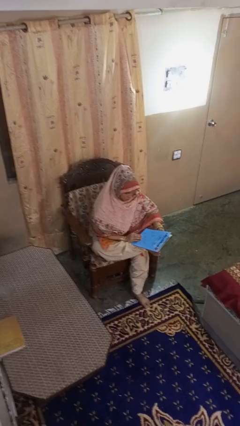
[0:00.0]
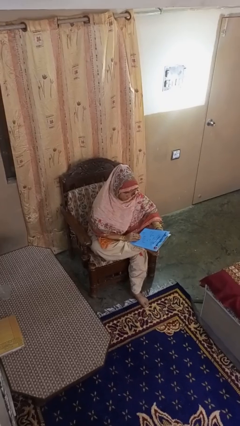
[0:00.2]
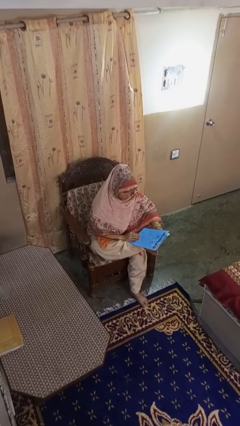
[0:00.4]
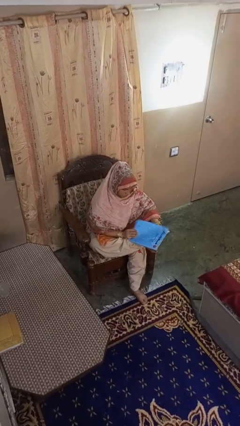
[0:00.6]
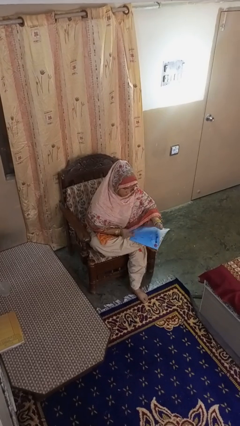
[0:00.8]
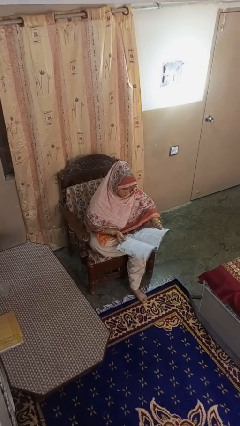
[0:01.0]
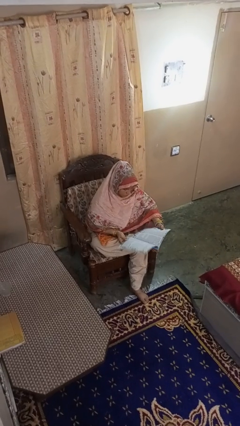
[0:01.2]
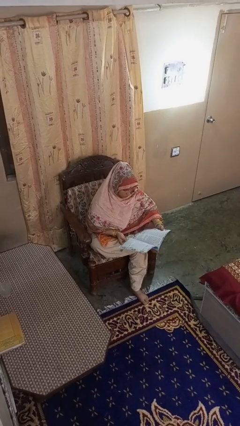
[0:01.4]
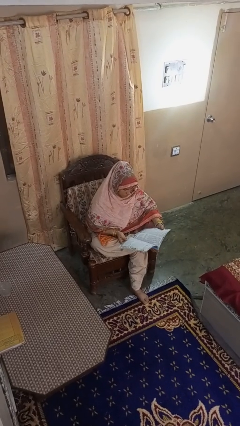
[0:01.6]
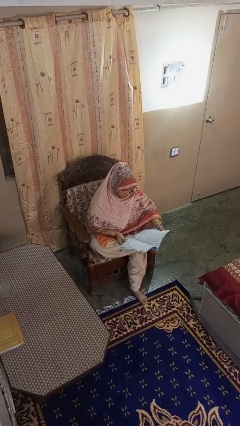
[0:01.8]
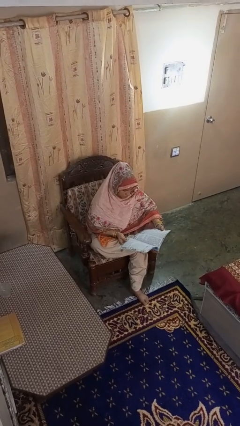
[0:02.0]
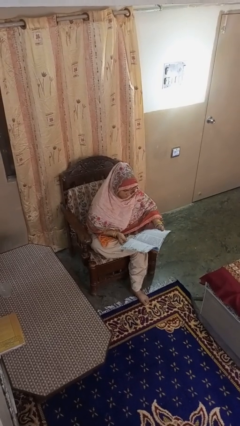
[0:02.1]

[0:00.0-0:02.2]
person reads magazine

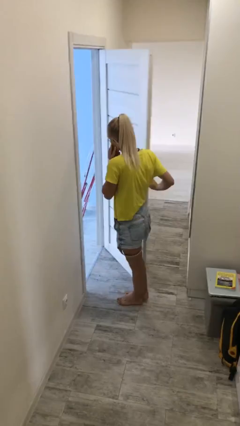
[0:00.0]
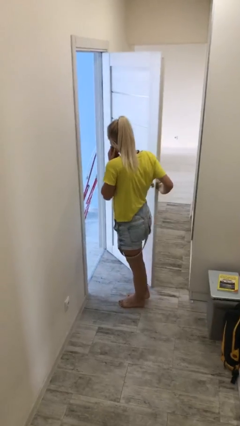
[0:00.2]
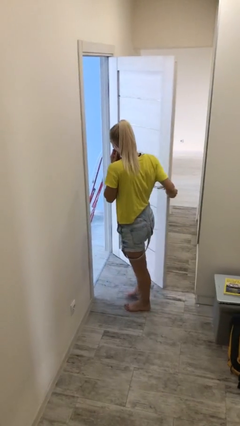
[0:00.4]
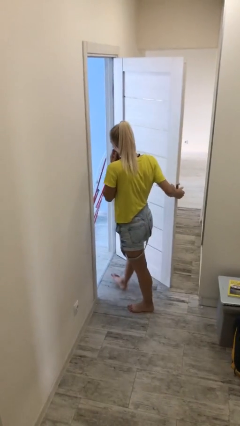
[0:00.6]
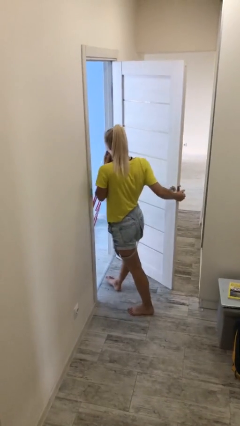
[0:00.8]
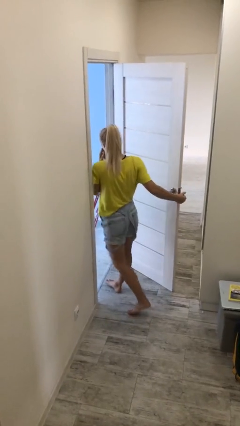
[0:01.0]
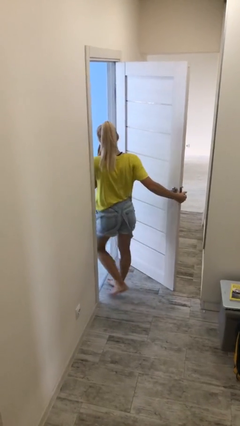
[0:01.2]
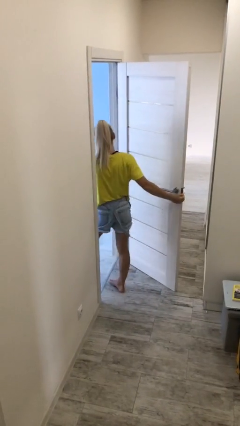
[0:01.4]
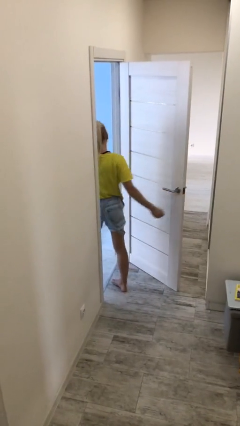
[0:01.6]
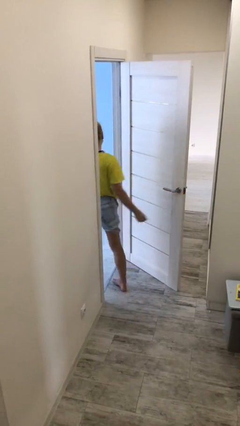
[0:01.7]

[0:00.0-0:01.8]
person exits scene through structure

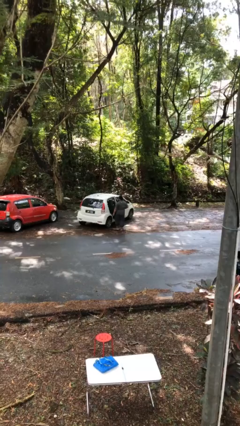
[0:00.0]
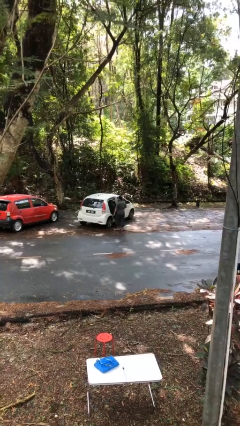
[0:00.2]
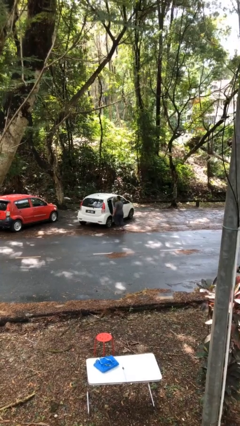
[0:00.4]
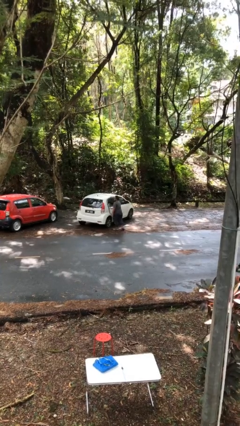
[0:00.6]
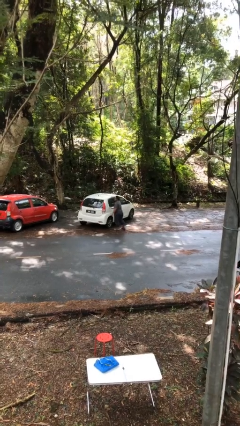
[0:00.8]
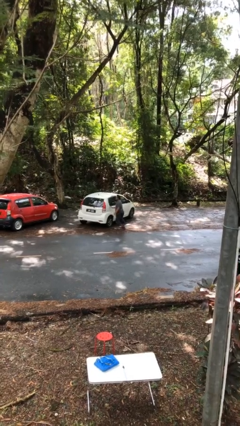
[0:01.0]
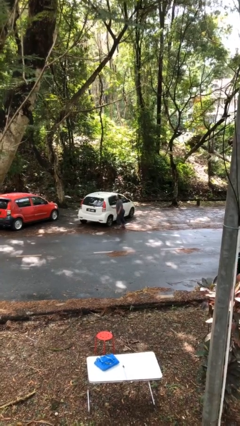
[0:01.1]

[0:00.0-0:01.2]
person closes car door

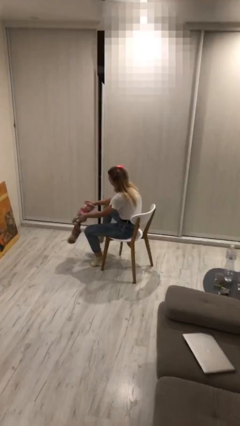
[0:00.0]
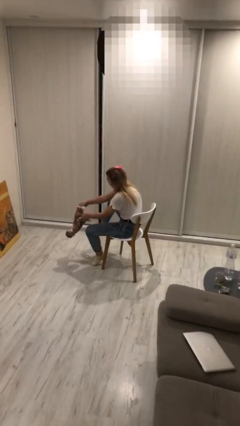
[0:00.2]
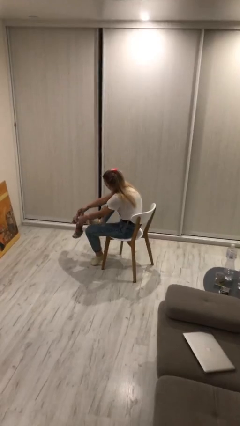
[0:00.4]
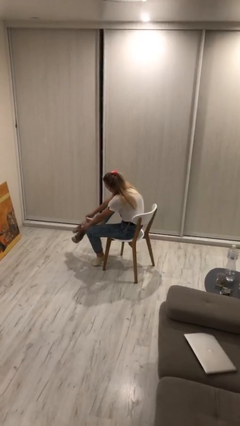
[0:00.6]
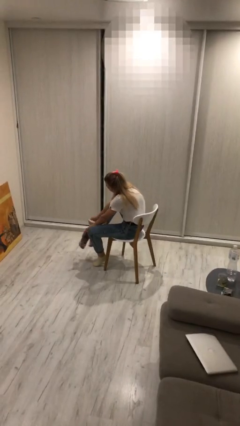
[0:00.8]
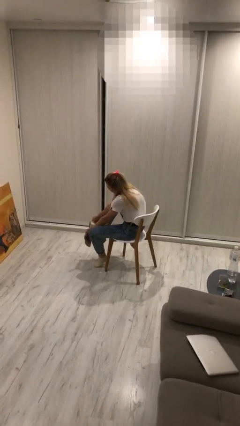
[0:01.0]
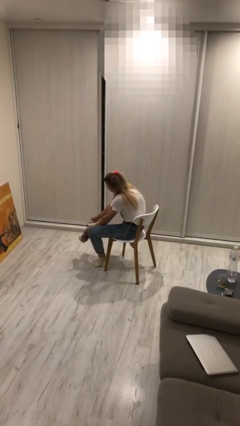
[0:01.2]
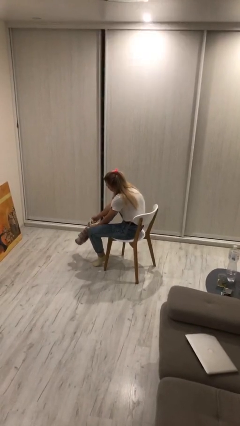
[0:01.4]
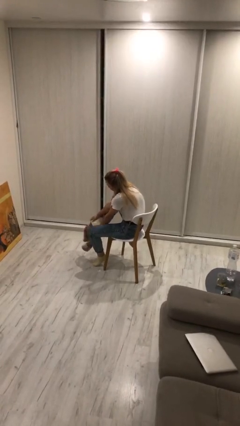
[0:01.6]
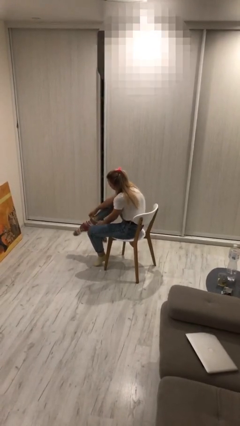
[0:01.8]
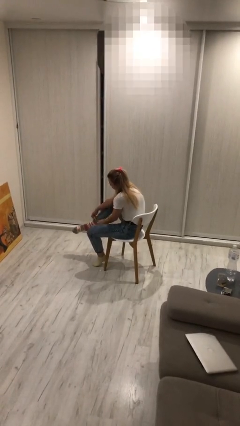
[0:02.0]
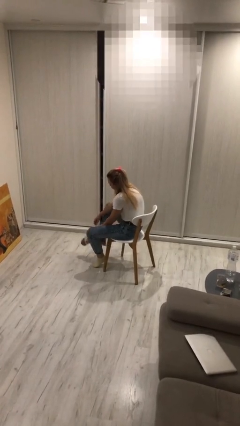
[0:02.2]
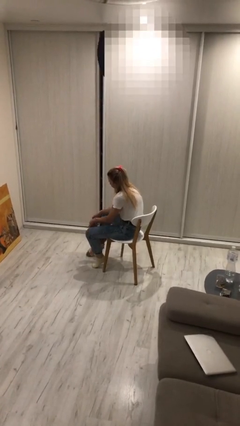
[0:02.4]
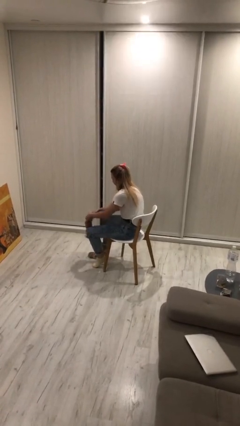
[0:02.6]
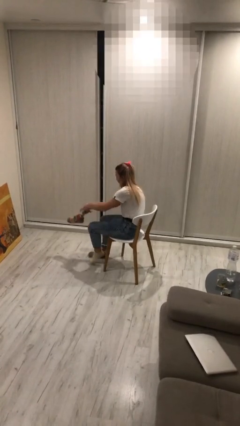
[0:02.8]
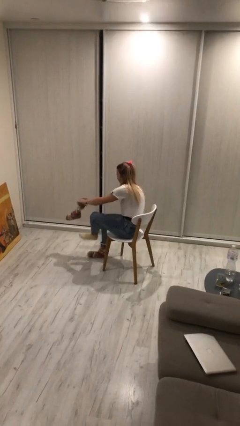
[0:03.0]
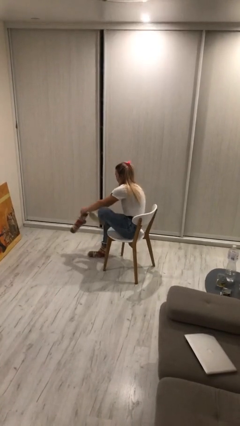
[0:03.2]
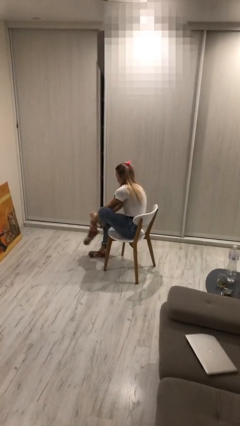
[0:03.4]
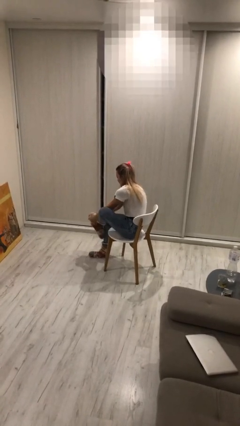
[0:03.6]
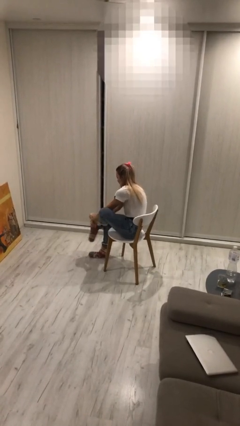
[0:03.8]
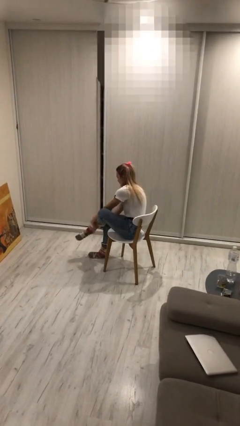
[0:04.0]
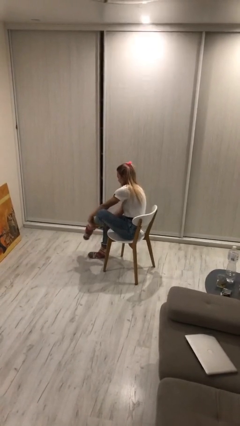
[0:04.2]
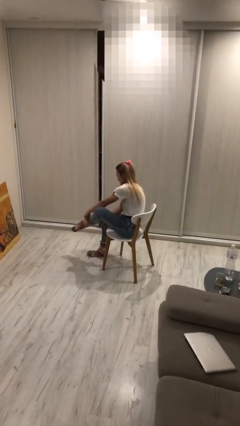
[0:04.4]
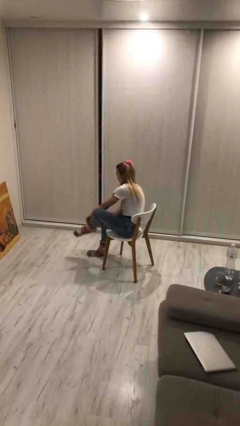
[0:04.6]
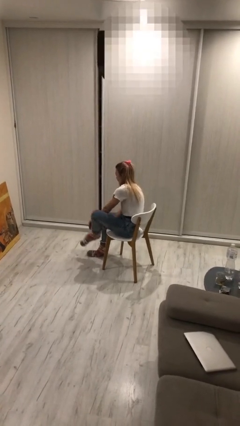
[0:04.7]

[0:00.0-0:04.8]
person puts on socks

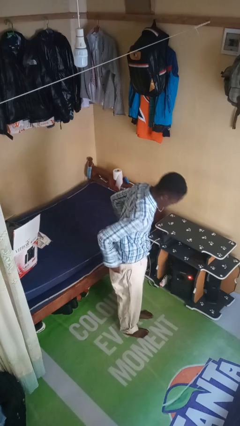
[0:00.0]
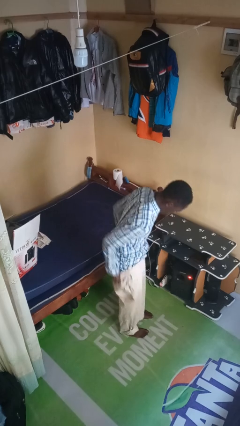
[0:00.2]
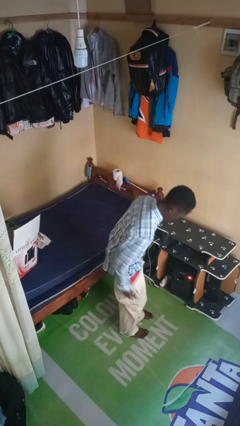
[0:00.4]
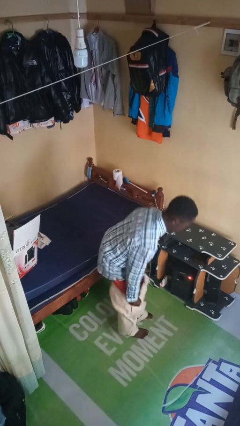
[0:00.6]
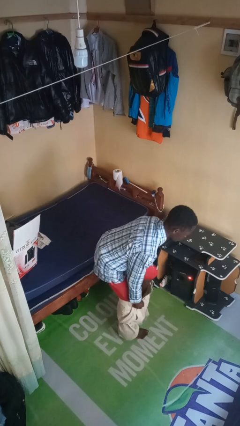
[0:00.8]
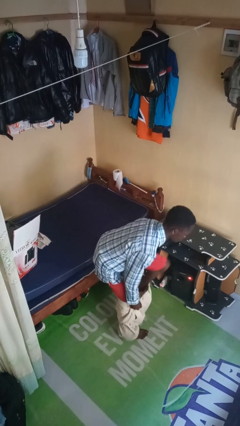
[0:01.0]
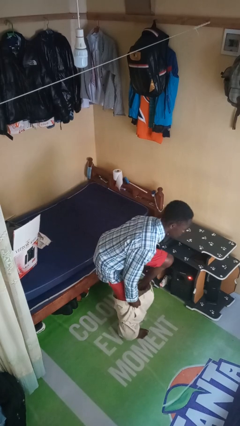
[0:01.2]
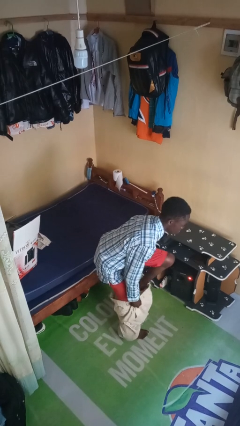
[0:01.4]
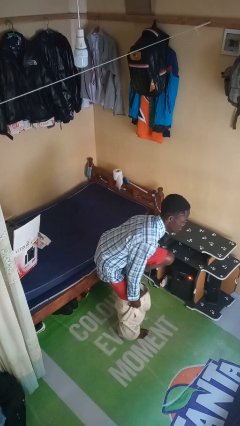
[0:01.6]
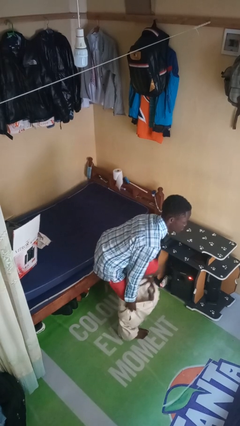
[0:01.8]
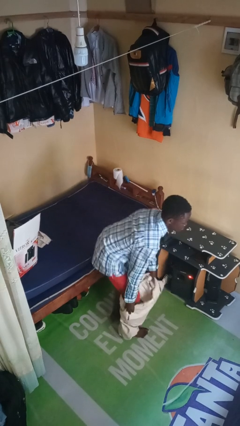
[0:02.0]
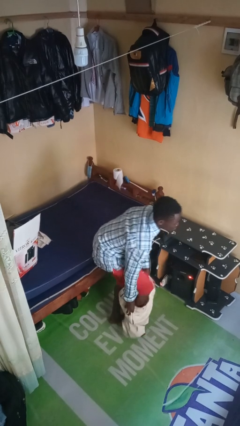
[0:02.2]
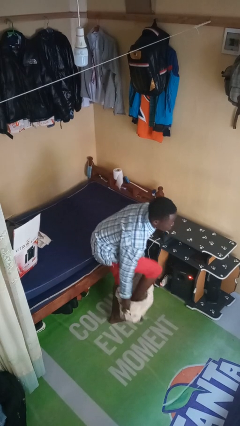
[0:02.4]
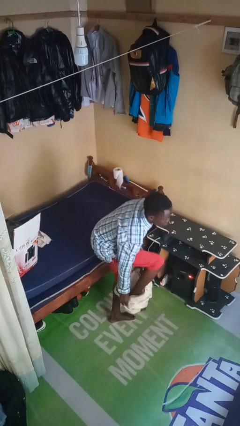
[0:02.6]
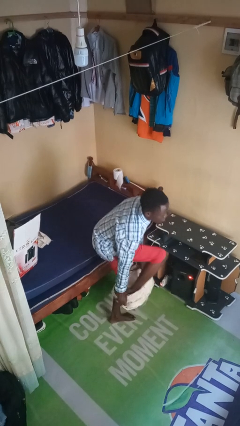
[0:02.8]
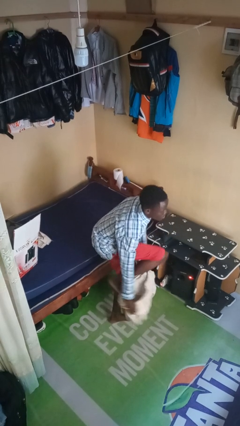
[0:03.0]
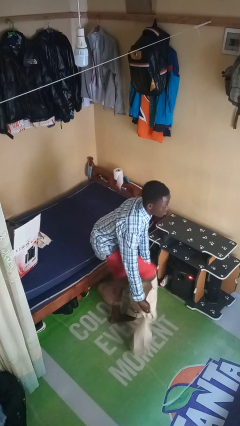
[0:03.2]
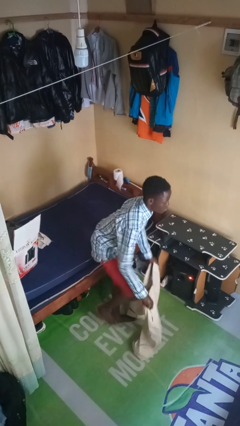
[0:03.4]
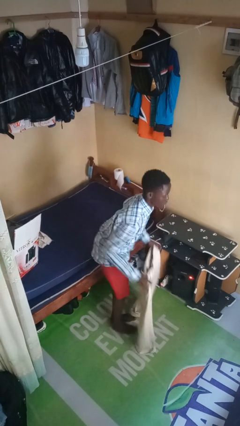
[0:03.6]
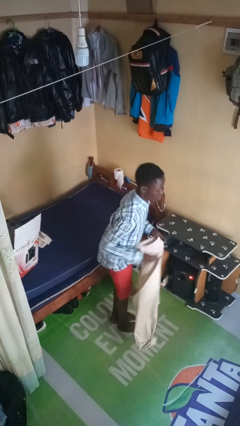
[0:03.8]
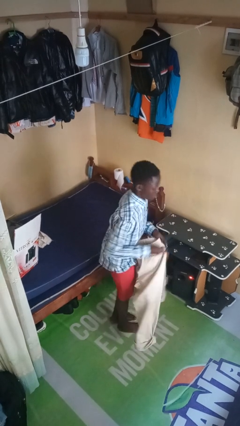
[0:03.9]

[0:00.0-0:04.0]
person takes off pants

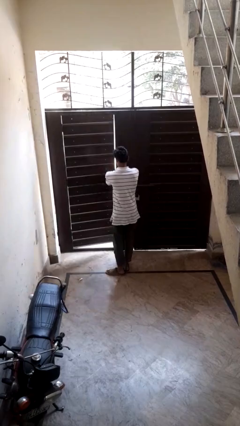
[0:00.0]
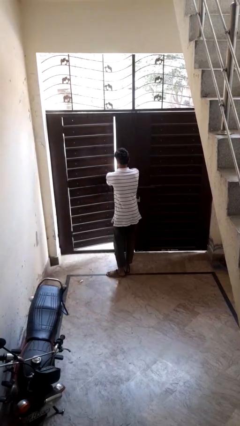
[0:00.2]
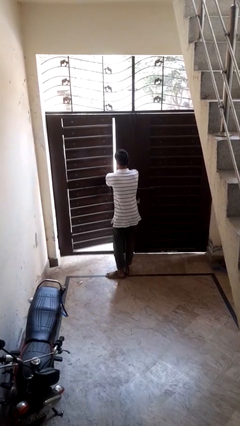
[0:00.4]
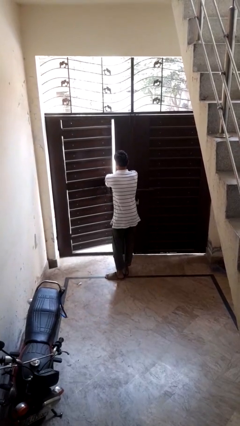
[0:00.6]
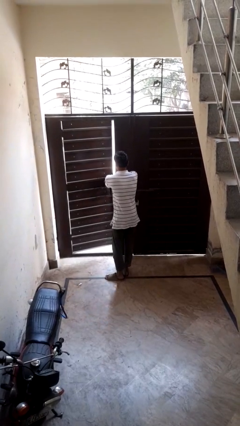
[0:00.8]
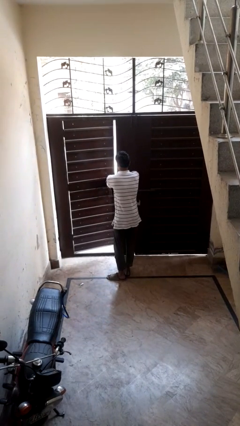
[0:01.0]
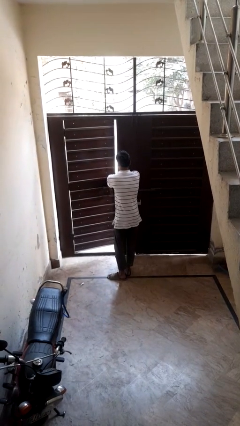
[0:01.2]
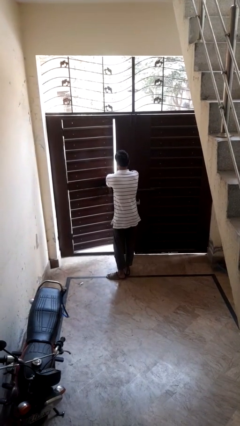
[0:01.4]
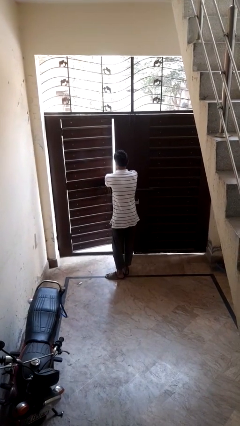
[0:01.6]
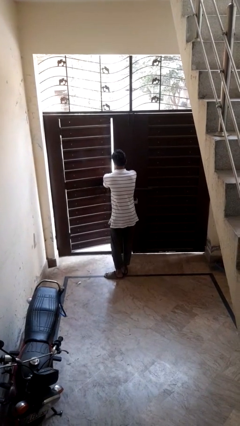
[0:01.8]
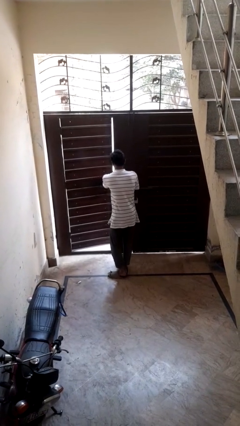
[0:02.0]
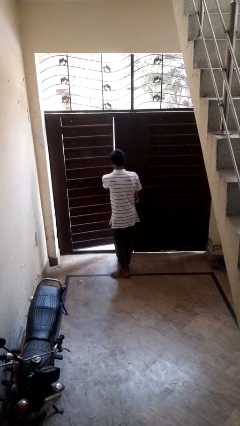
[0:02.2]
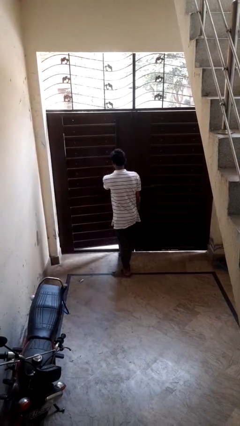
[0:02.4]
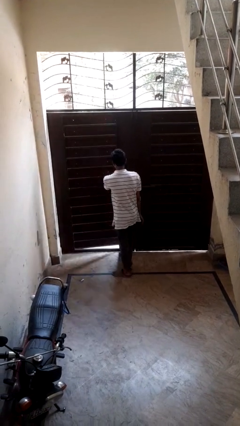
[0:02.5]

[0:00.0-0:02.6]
person opens facility door

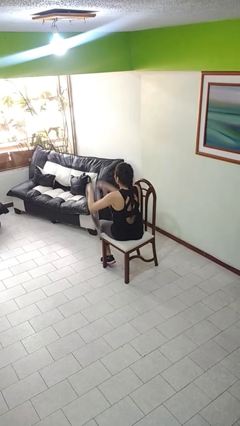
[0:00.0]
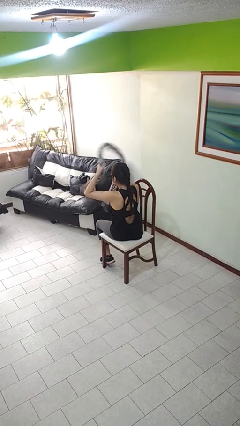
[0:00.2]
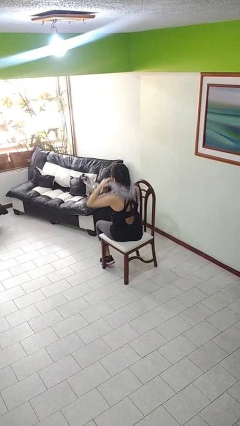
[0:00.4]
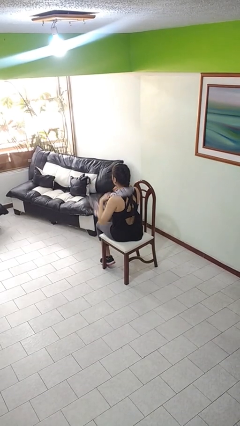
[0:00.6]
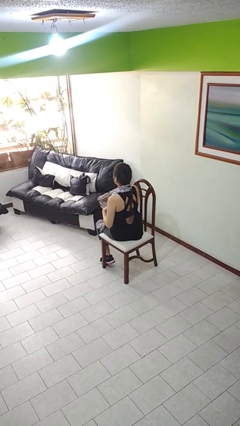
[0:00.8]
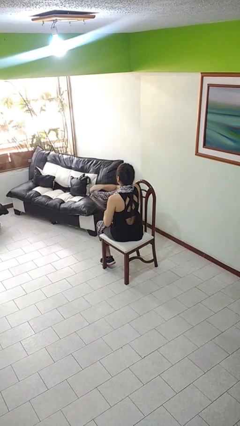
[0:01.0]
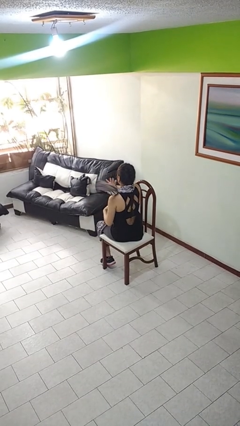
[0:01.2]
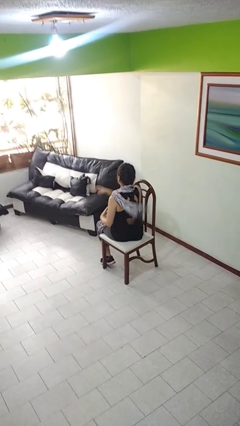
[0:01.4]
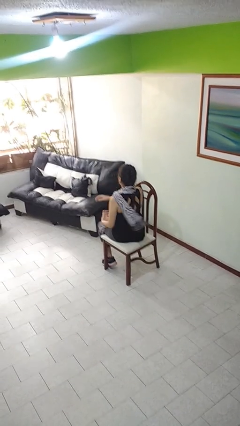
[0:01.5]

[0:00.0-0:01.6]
person puts on scarf
